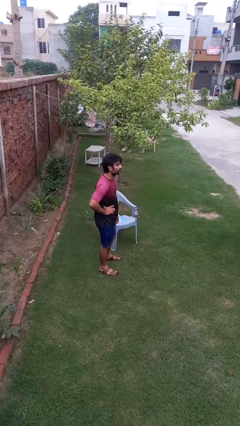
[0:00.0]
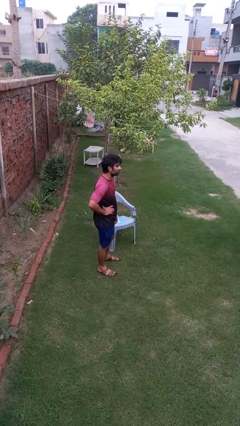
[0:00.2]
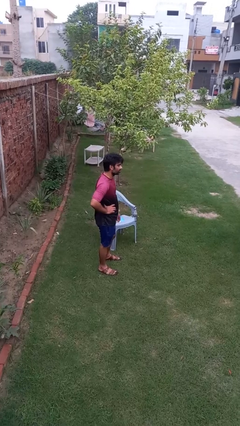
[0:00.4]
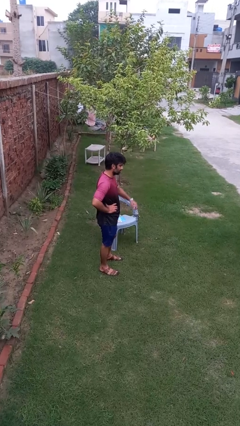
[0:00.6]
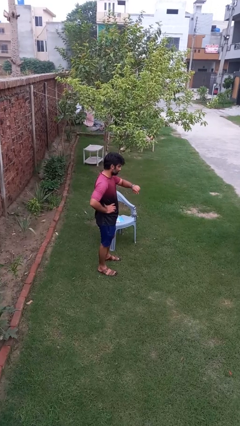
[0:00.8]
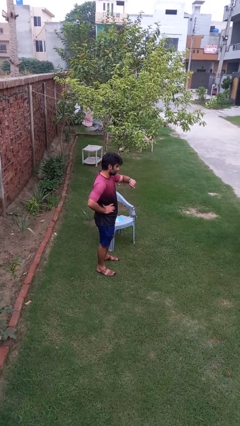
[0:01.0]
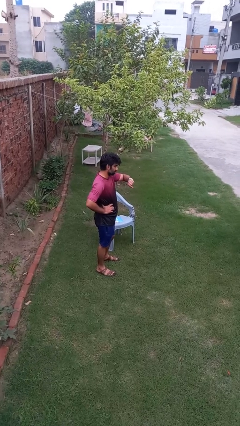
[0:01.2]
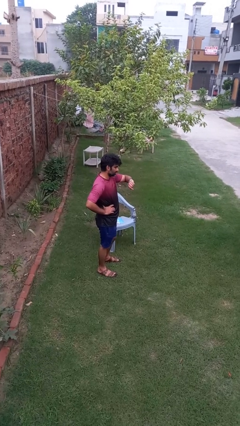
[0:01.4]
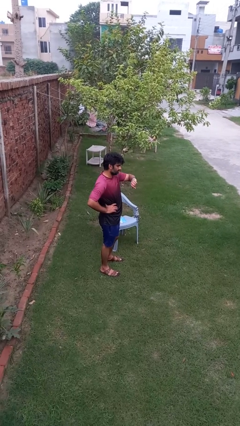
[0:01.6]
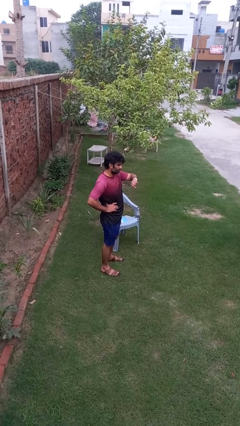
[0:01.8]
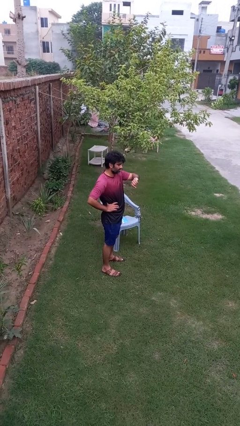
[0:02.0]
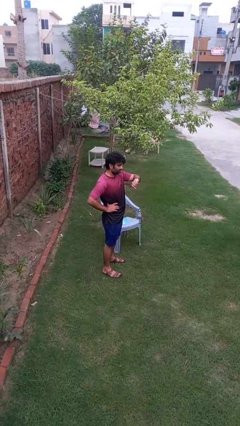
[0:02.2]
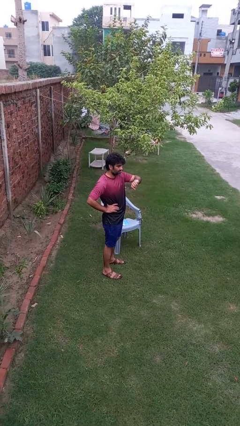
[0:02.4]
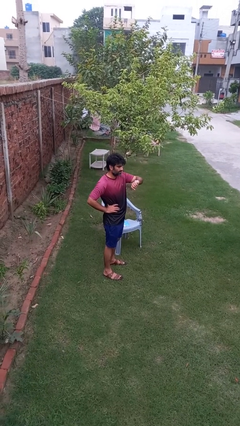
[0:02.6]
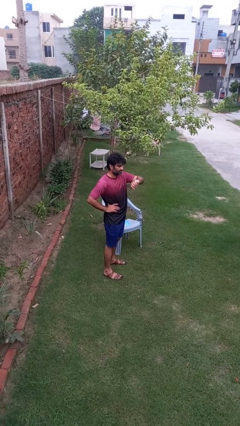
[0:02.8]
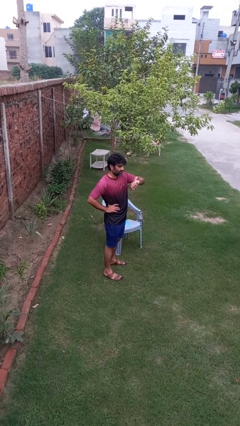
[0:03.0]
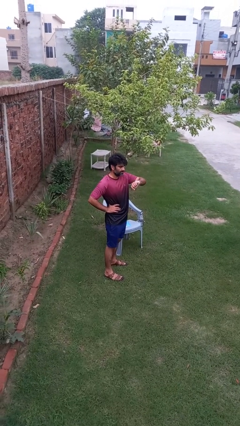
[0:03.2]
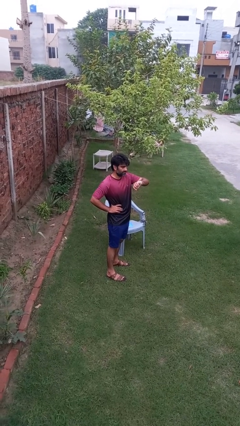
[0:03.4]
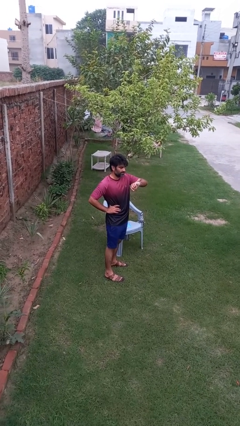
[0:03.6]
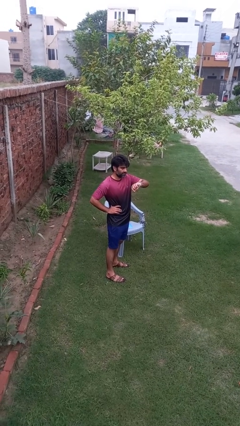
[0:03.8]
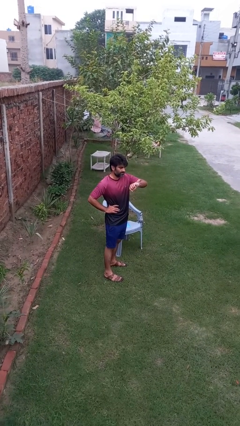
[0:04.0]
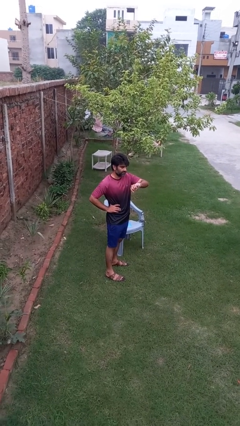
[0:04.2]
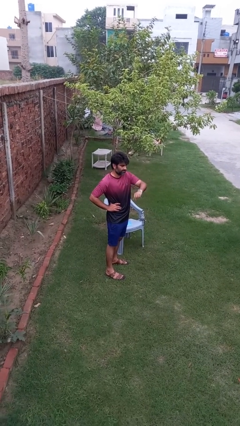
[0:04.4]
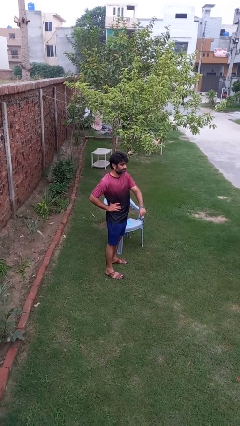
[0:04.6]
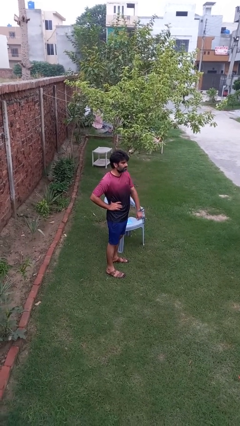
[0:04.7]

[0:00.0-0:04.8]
person looks at wristwatch

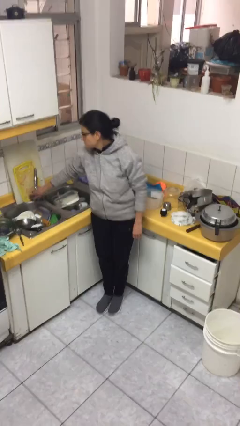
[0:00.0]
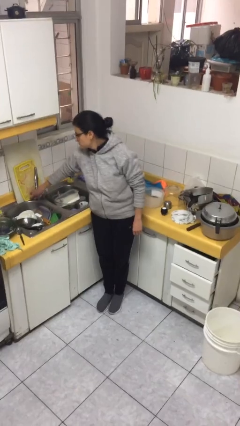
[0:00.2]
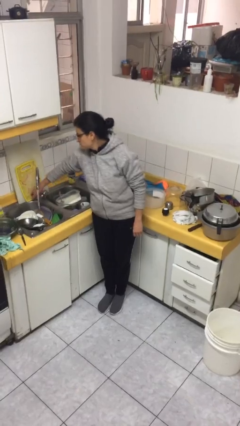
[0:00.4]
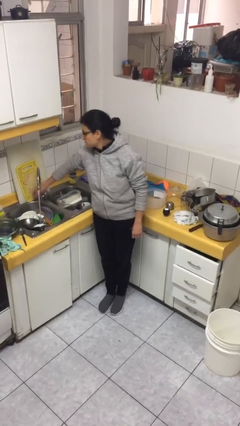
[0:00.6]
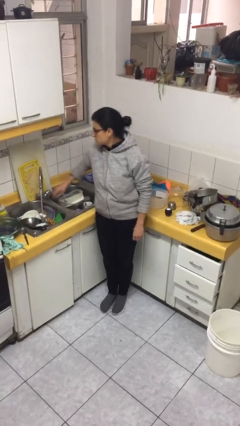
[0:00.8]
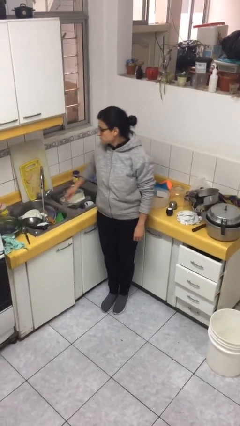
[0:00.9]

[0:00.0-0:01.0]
person turns on faucet

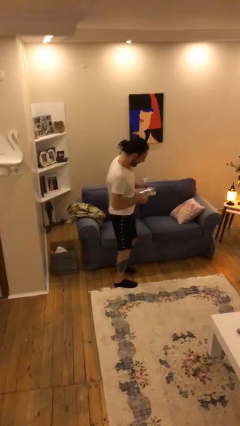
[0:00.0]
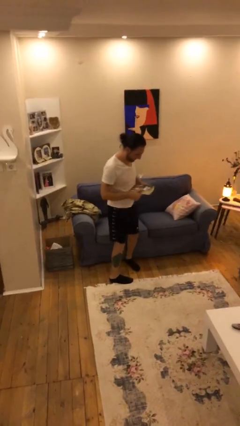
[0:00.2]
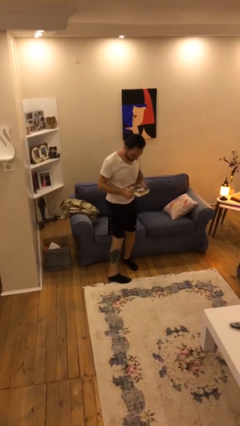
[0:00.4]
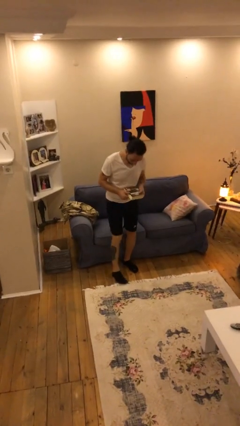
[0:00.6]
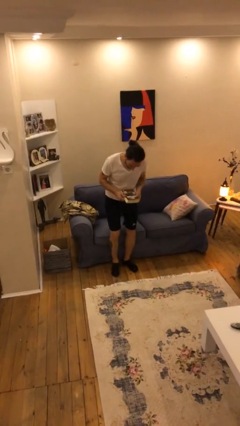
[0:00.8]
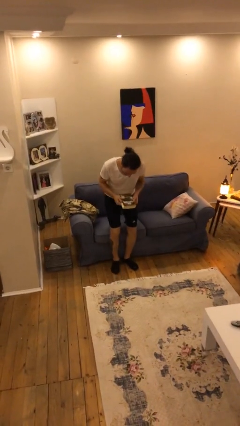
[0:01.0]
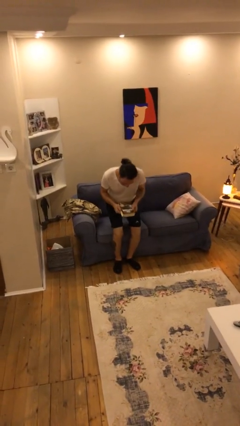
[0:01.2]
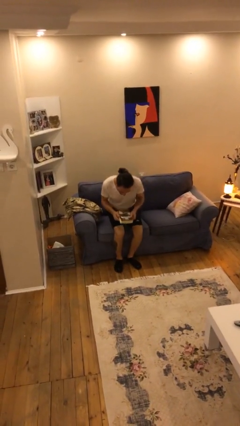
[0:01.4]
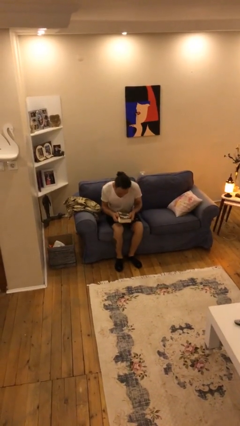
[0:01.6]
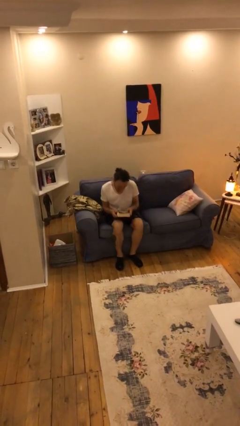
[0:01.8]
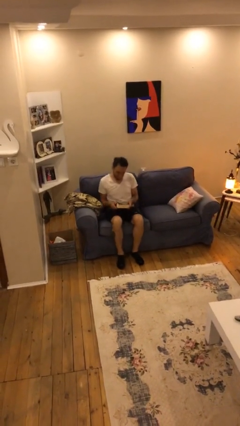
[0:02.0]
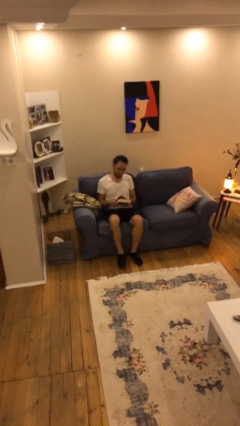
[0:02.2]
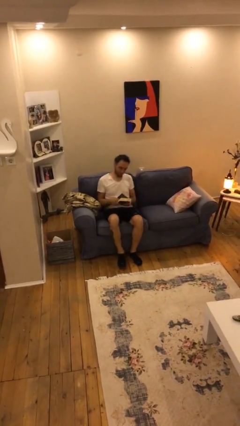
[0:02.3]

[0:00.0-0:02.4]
person sits down

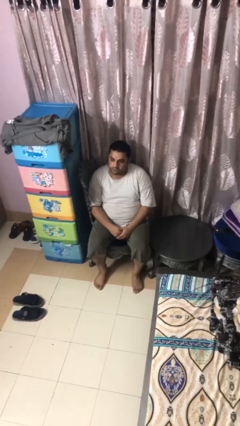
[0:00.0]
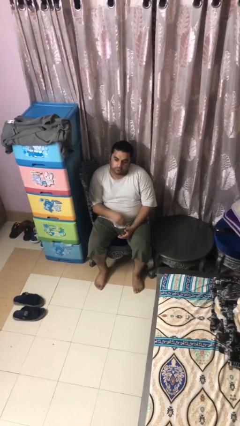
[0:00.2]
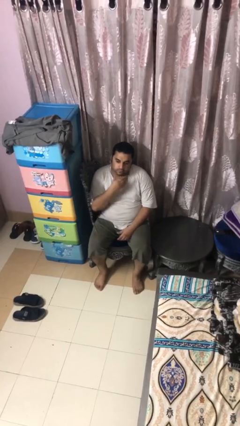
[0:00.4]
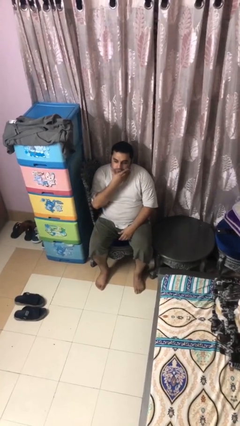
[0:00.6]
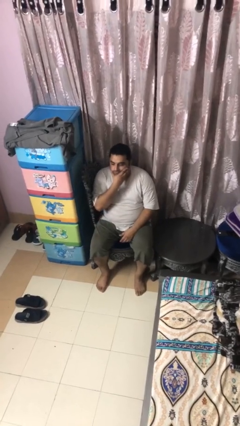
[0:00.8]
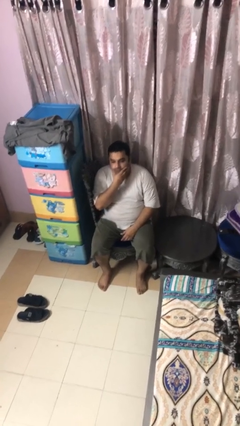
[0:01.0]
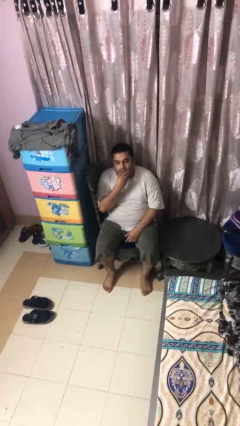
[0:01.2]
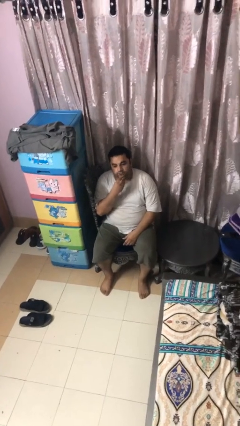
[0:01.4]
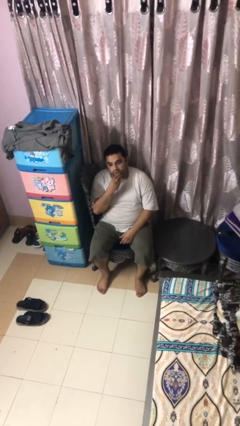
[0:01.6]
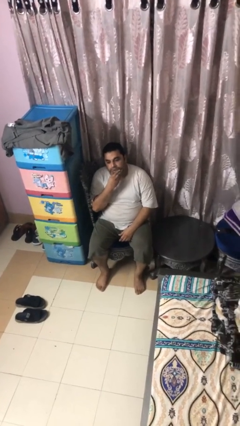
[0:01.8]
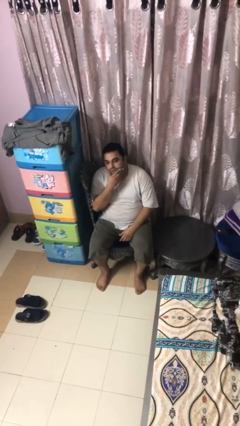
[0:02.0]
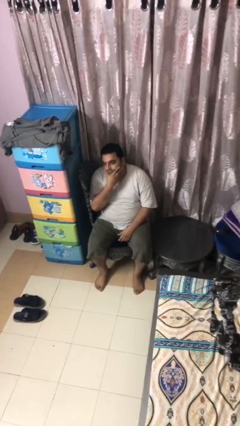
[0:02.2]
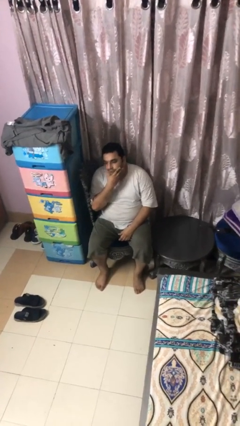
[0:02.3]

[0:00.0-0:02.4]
person strokes chin

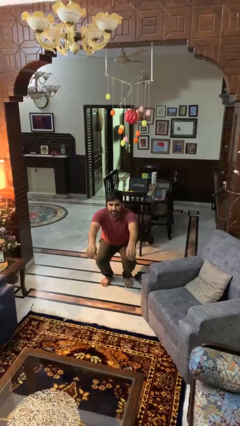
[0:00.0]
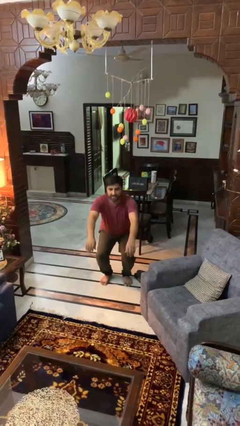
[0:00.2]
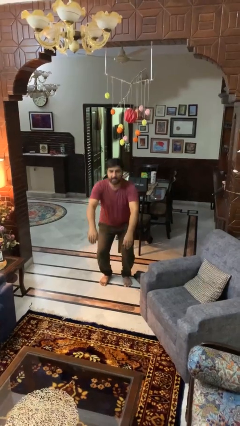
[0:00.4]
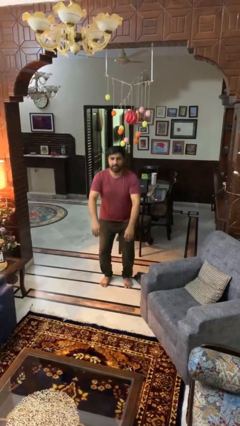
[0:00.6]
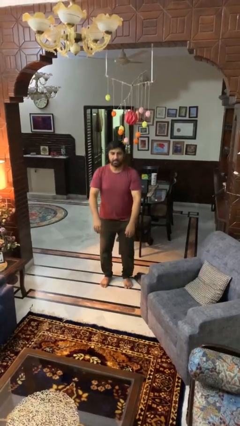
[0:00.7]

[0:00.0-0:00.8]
person stands up

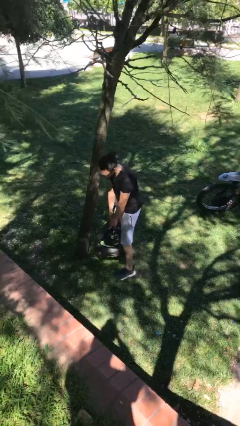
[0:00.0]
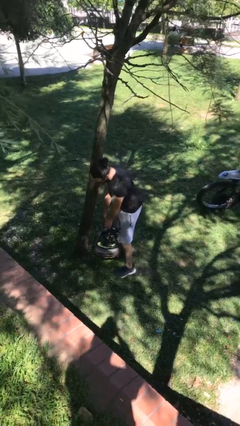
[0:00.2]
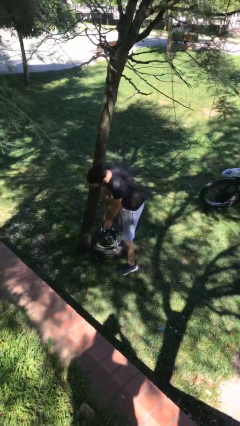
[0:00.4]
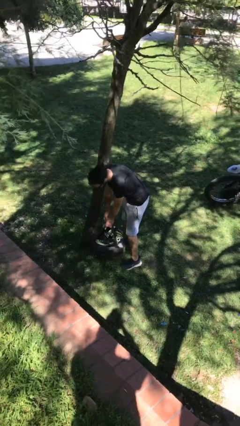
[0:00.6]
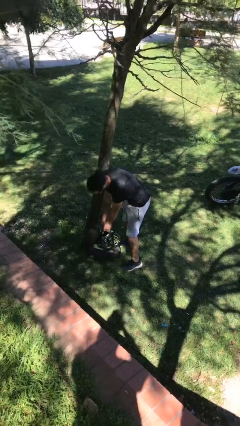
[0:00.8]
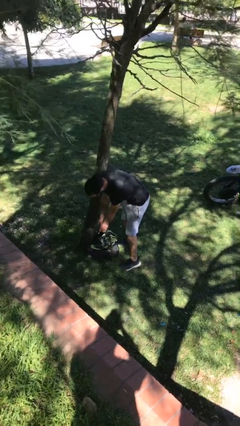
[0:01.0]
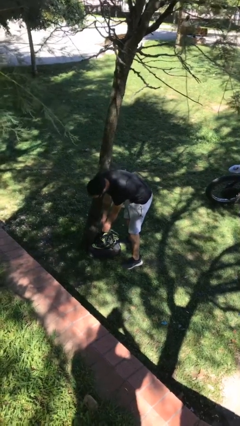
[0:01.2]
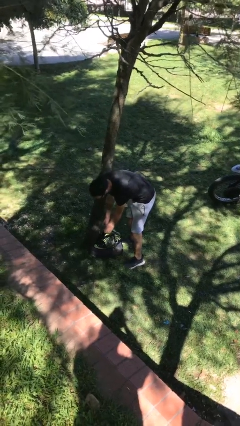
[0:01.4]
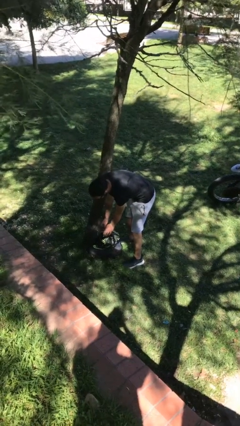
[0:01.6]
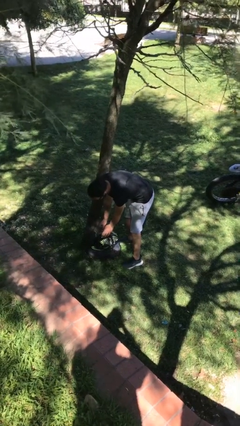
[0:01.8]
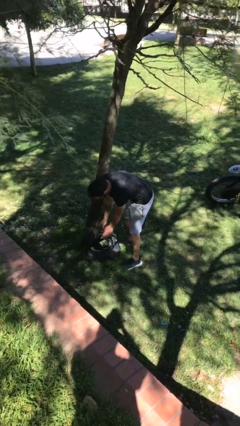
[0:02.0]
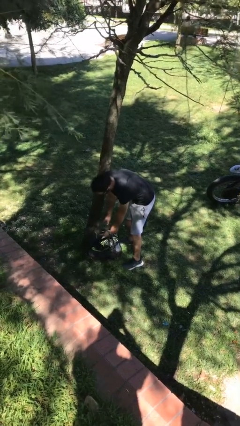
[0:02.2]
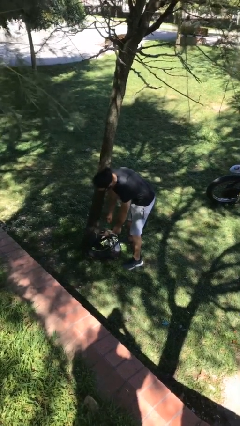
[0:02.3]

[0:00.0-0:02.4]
person puts down object on floor

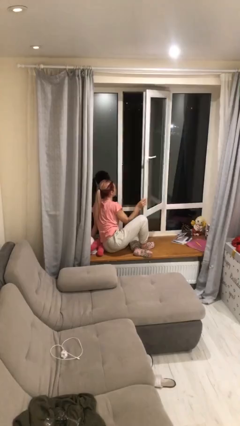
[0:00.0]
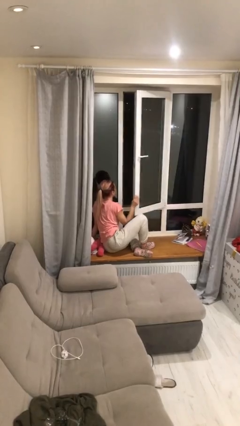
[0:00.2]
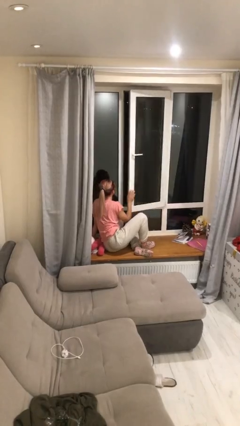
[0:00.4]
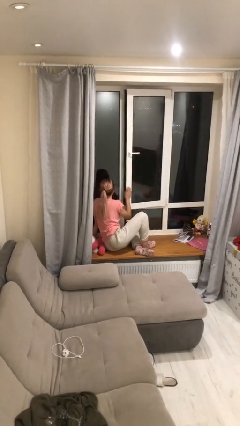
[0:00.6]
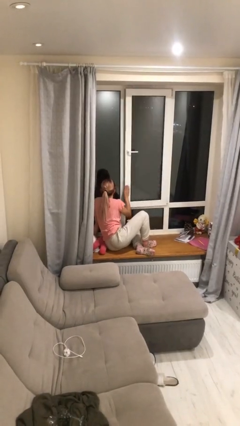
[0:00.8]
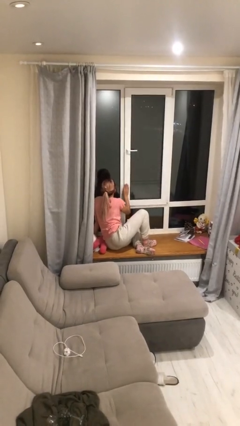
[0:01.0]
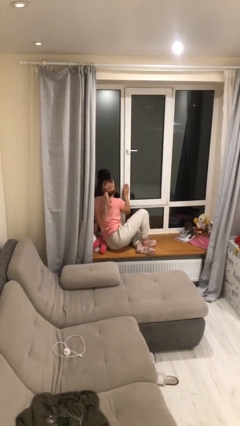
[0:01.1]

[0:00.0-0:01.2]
person closes home window

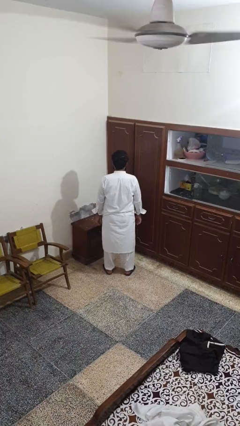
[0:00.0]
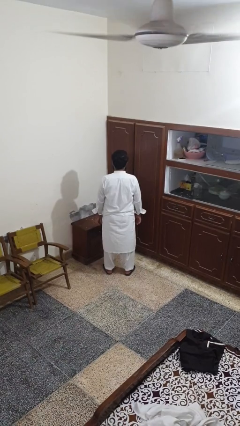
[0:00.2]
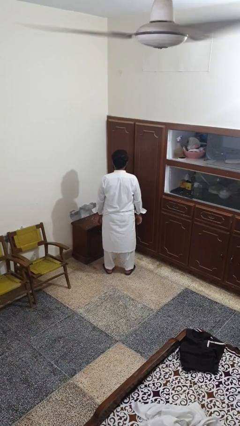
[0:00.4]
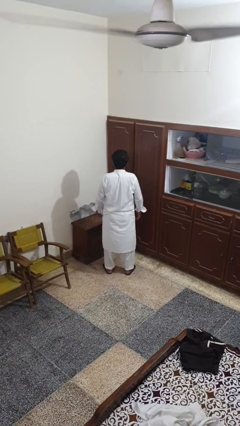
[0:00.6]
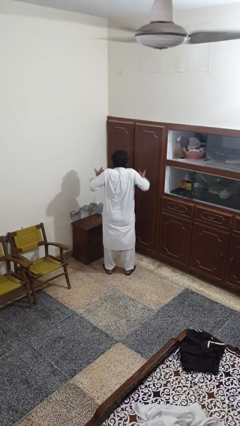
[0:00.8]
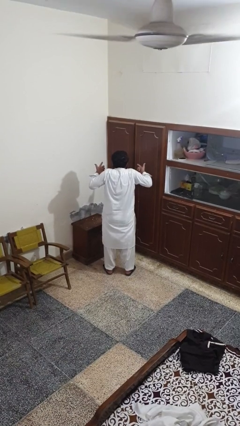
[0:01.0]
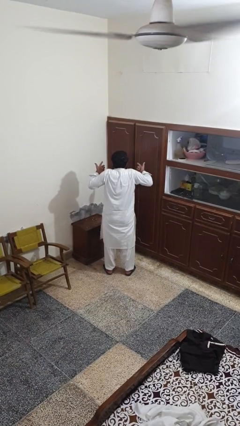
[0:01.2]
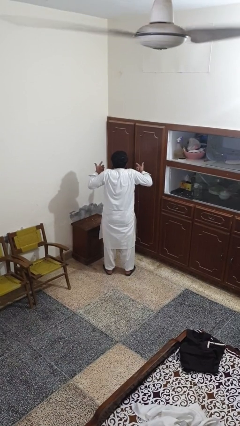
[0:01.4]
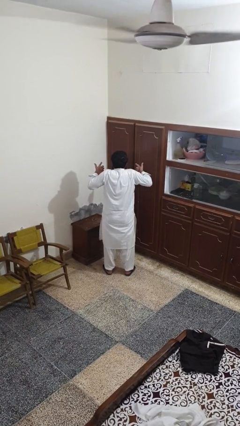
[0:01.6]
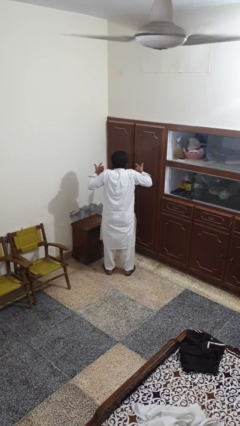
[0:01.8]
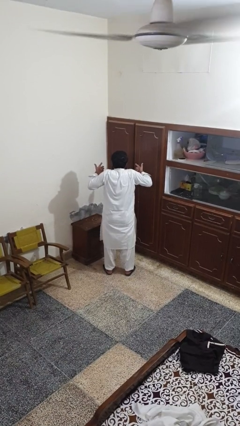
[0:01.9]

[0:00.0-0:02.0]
person shrugs
